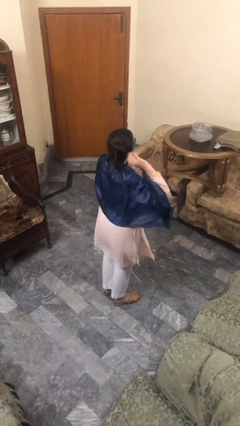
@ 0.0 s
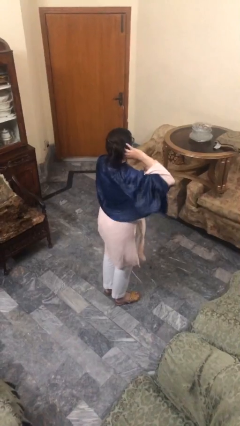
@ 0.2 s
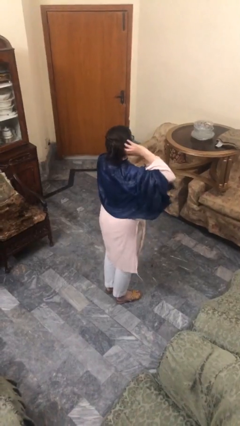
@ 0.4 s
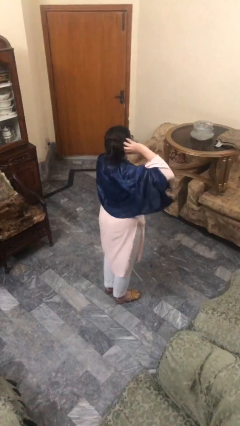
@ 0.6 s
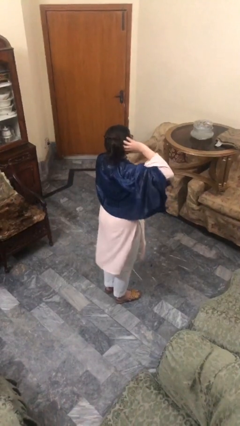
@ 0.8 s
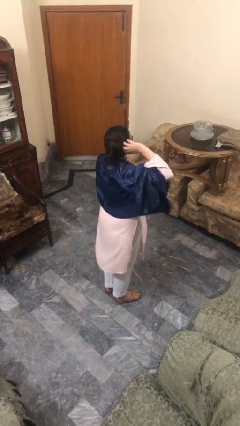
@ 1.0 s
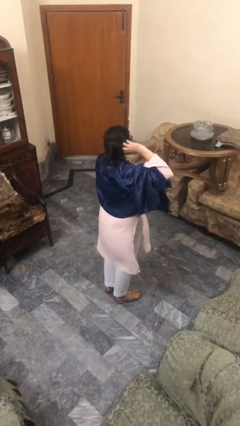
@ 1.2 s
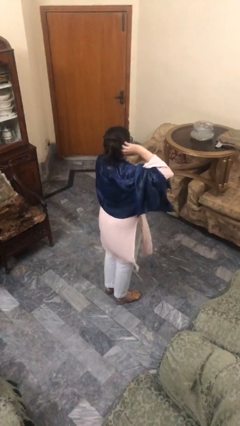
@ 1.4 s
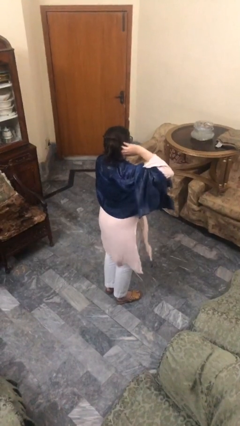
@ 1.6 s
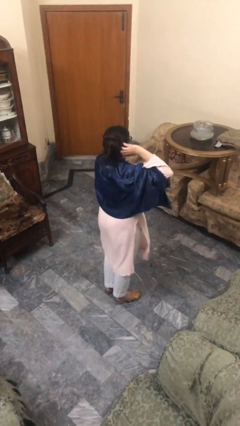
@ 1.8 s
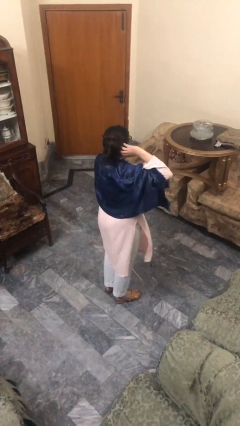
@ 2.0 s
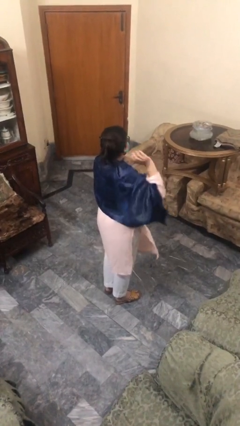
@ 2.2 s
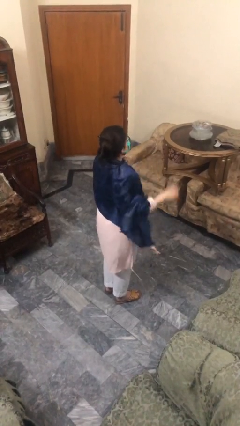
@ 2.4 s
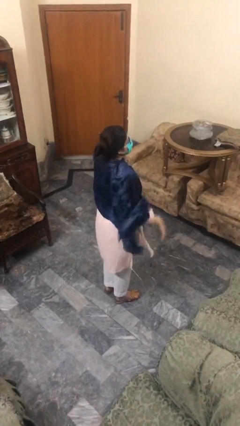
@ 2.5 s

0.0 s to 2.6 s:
person scratches face

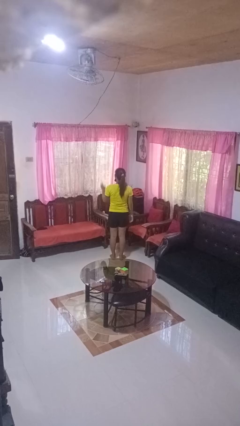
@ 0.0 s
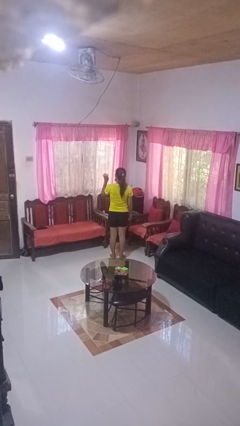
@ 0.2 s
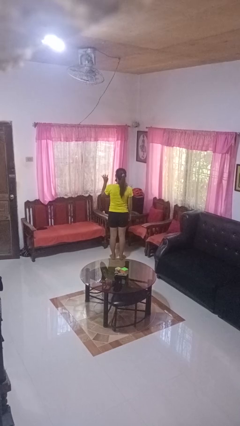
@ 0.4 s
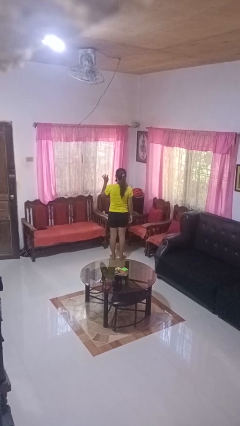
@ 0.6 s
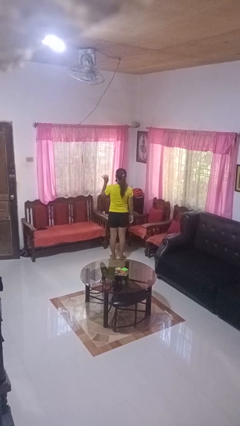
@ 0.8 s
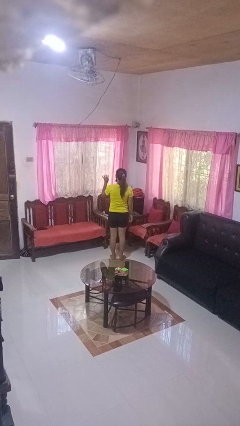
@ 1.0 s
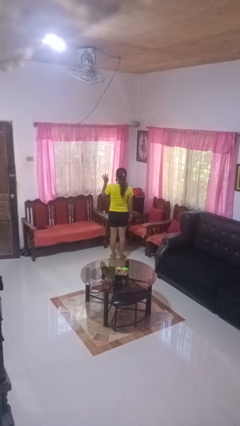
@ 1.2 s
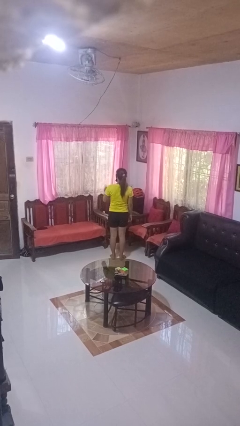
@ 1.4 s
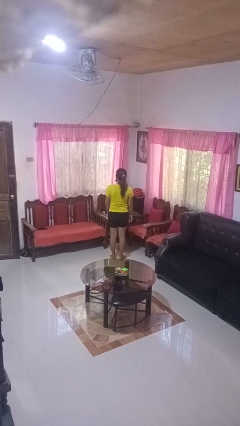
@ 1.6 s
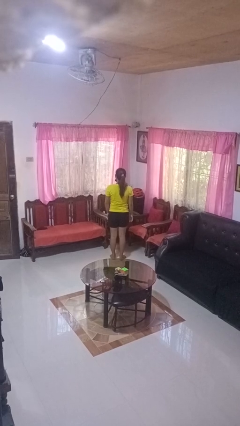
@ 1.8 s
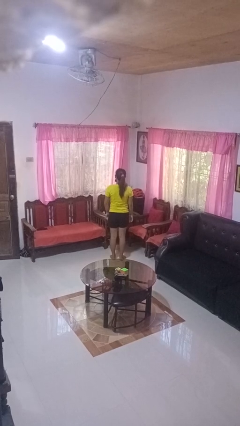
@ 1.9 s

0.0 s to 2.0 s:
person gestures number four

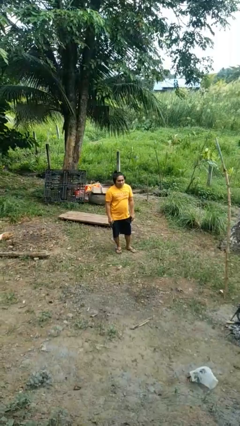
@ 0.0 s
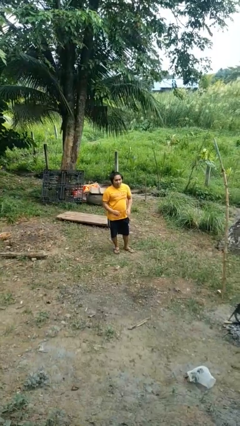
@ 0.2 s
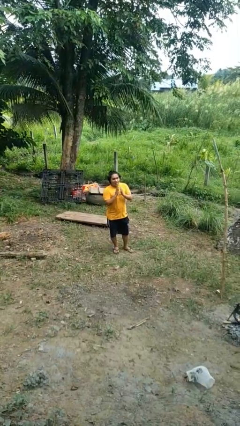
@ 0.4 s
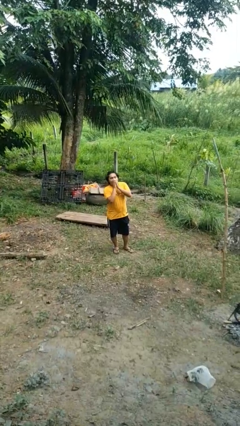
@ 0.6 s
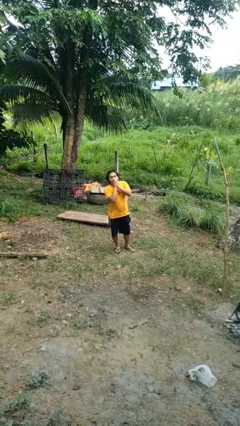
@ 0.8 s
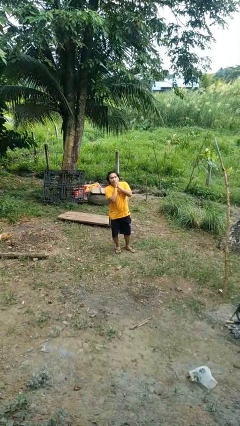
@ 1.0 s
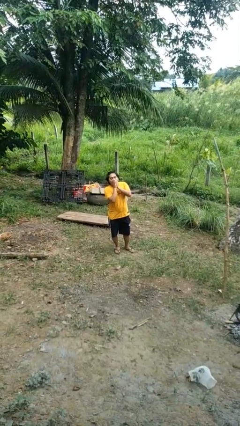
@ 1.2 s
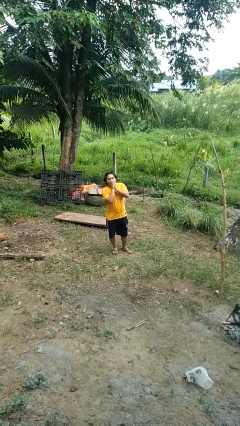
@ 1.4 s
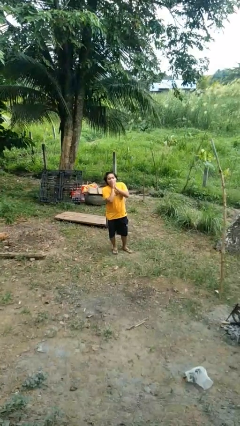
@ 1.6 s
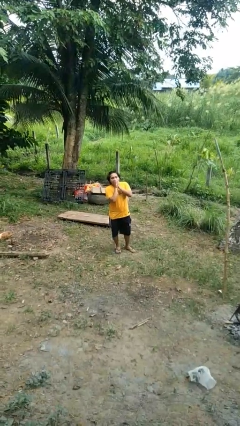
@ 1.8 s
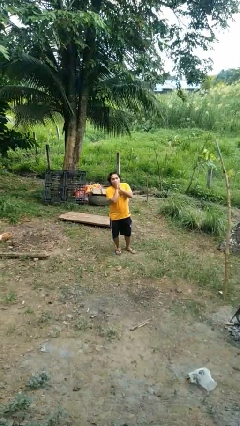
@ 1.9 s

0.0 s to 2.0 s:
person covers face with hands

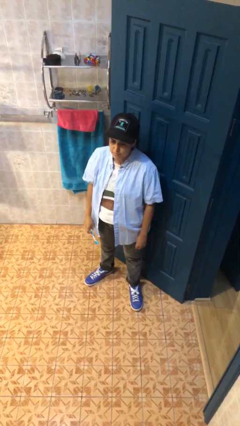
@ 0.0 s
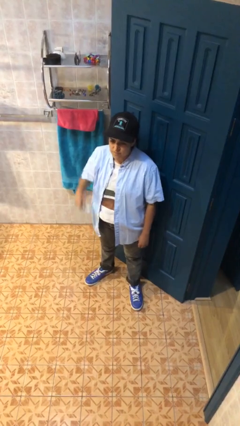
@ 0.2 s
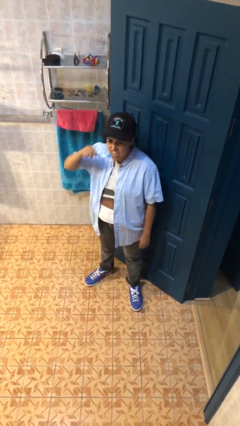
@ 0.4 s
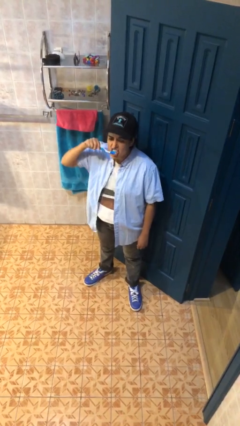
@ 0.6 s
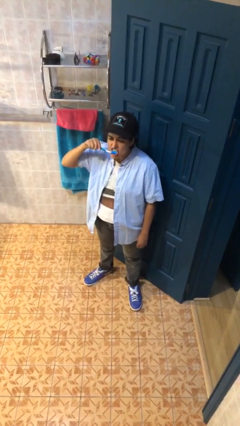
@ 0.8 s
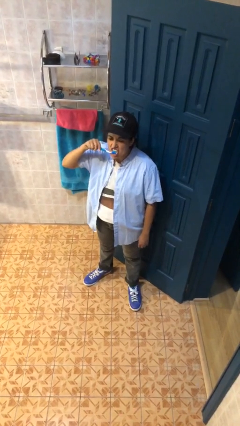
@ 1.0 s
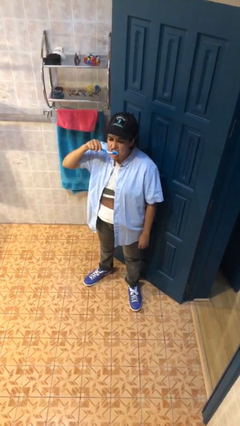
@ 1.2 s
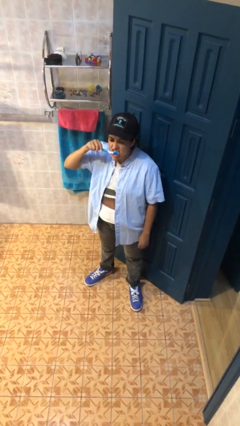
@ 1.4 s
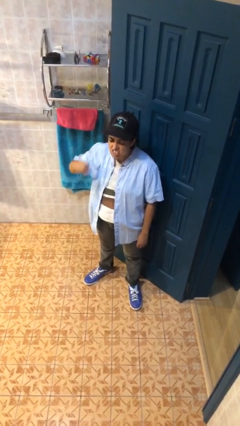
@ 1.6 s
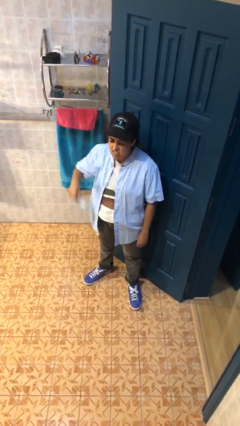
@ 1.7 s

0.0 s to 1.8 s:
person brushes teeth

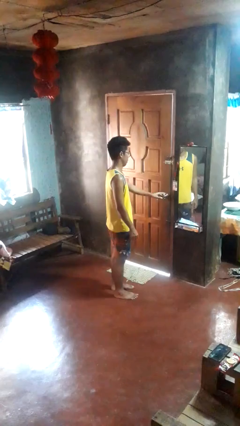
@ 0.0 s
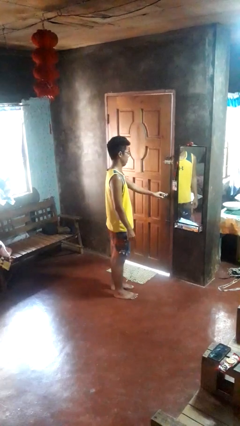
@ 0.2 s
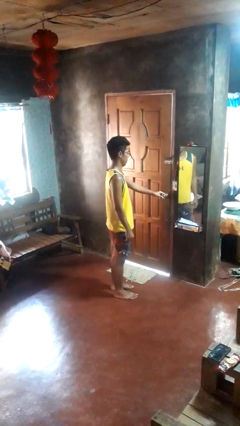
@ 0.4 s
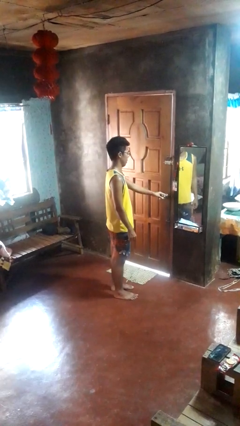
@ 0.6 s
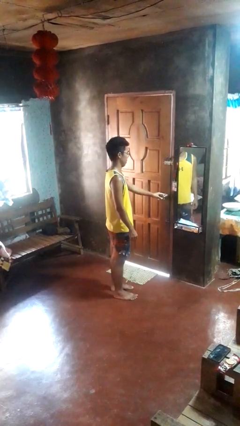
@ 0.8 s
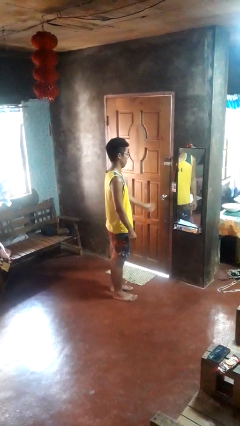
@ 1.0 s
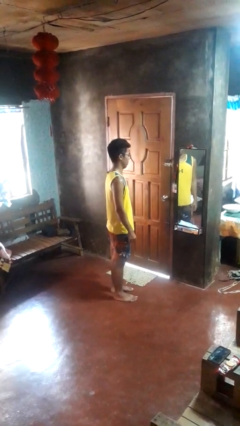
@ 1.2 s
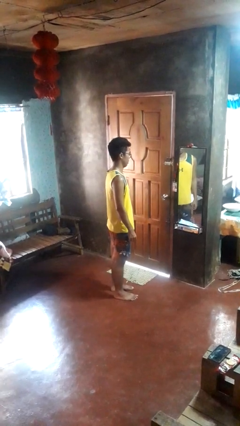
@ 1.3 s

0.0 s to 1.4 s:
person locks door with keys

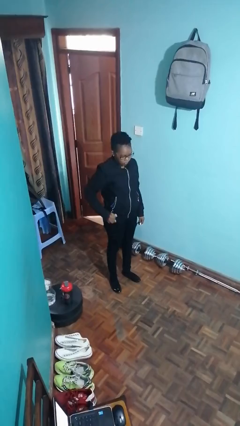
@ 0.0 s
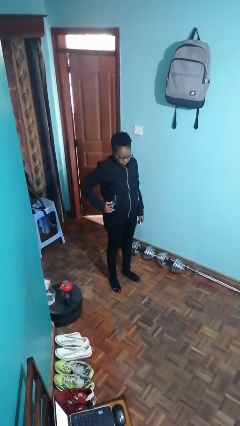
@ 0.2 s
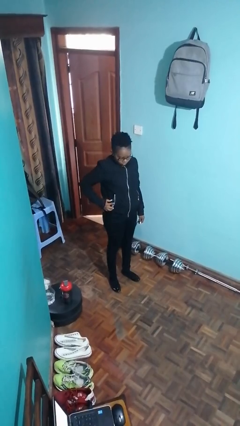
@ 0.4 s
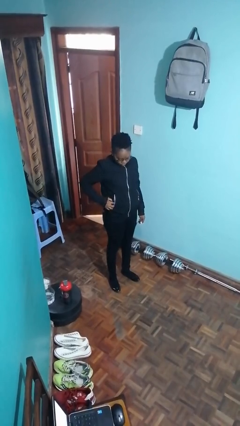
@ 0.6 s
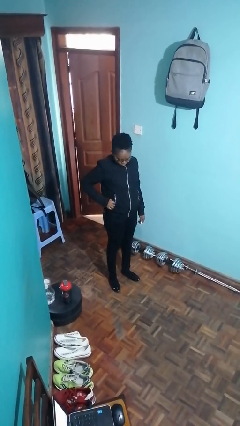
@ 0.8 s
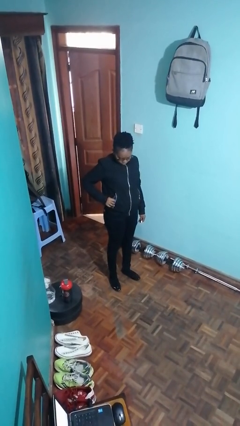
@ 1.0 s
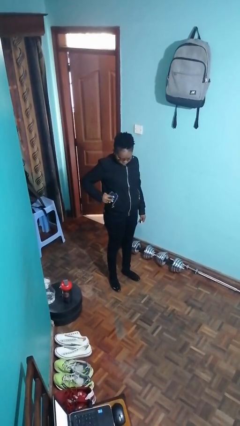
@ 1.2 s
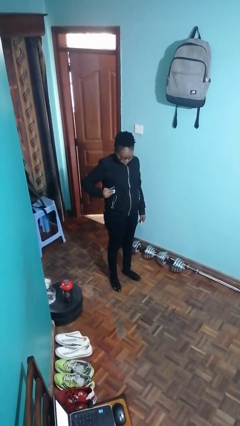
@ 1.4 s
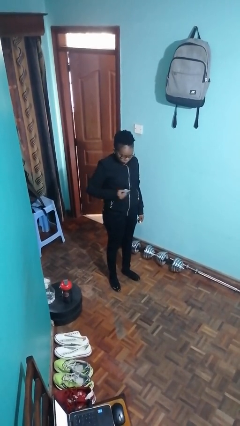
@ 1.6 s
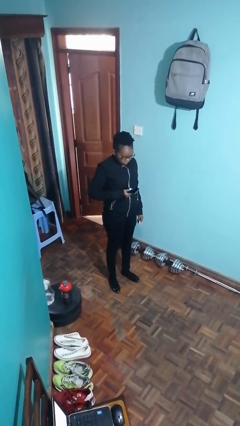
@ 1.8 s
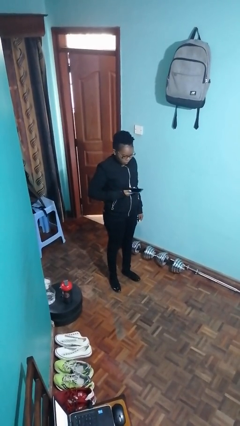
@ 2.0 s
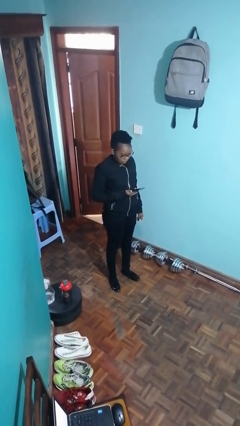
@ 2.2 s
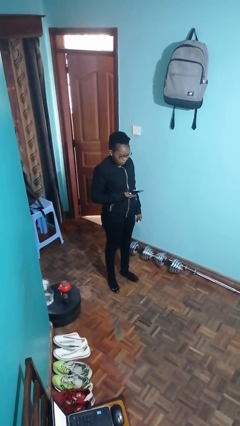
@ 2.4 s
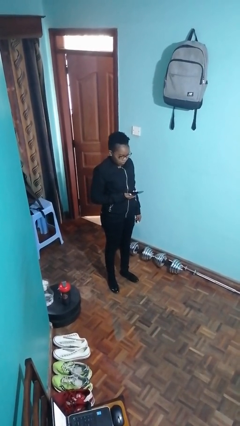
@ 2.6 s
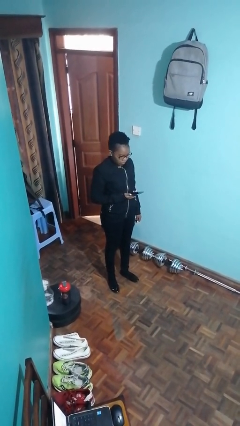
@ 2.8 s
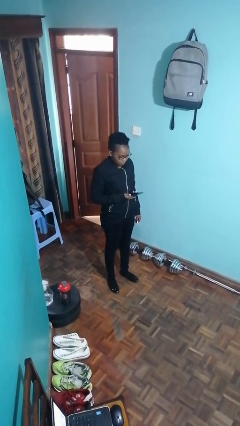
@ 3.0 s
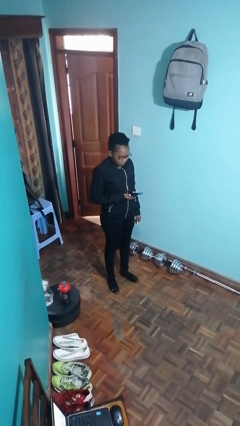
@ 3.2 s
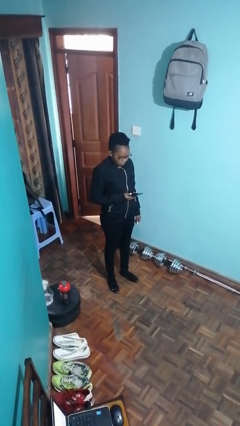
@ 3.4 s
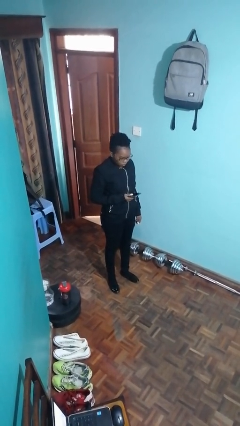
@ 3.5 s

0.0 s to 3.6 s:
person takes phone from pocket

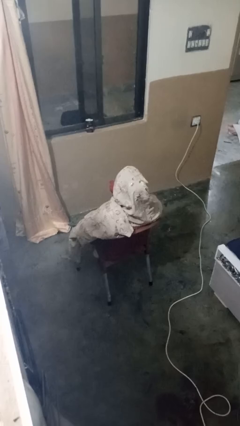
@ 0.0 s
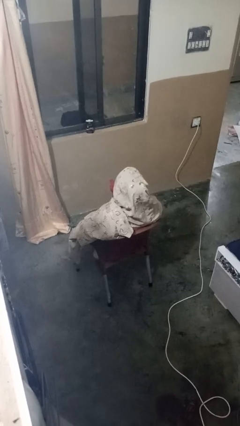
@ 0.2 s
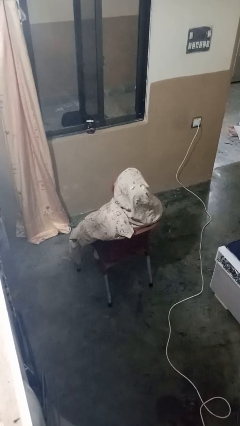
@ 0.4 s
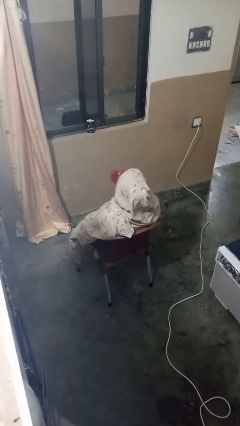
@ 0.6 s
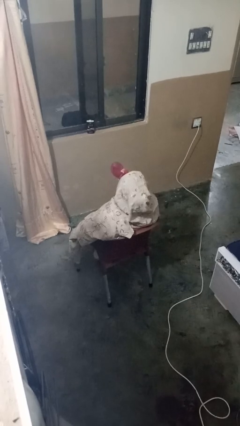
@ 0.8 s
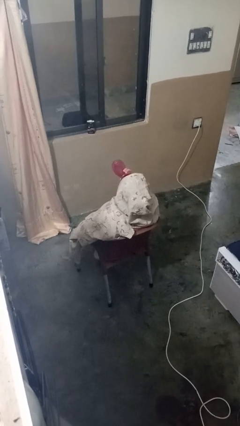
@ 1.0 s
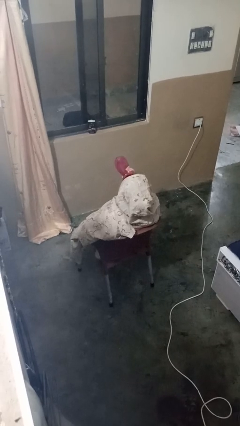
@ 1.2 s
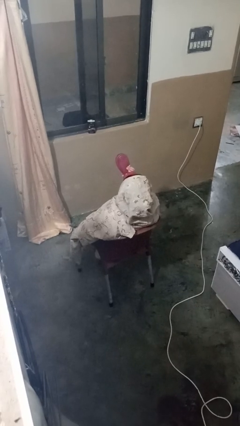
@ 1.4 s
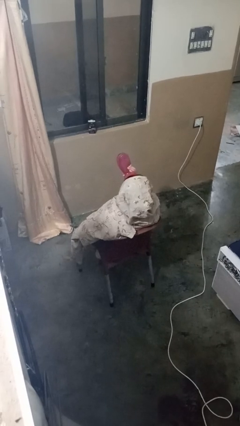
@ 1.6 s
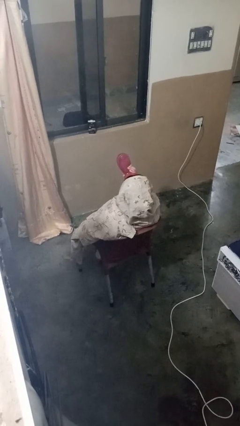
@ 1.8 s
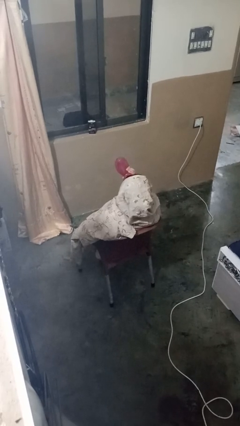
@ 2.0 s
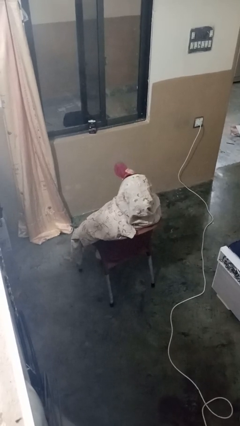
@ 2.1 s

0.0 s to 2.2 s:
person drinks from bottle

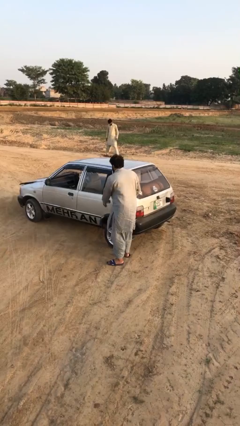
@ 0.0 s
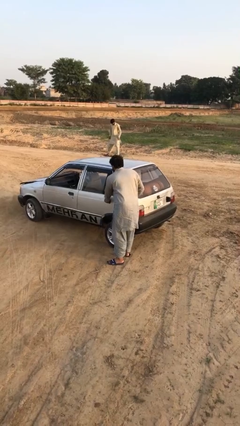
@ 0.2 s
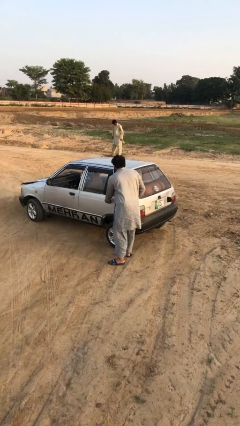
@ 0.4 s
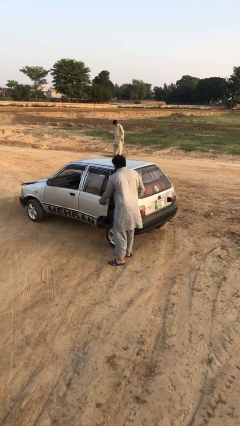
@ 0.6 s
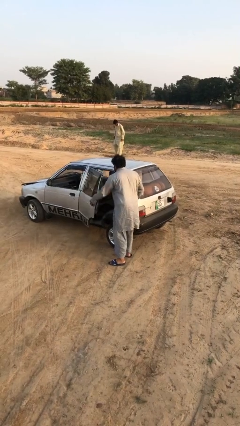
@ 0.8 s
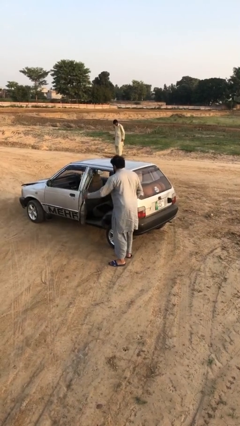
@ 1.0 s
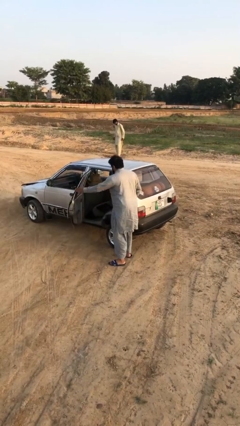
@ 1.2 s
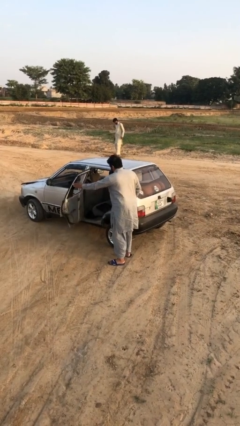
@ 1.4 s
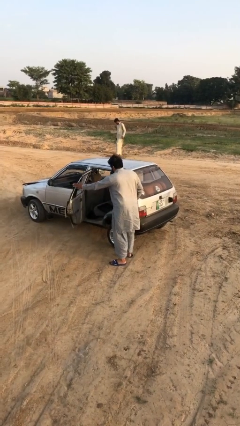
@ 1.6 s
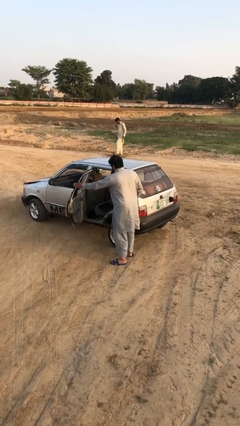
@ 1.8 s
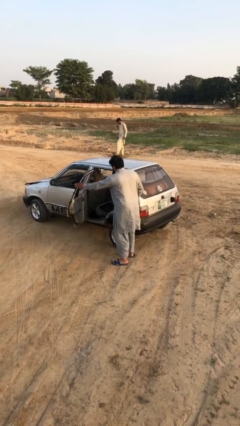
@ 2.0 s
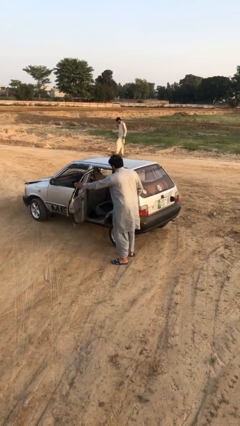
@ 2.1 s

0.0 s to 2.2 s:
person opens car door
